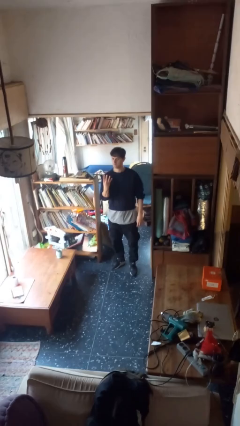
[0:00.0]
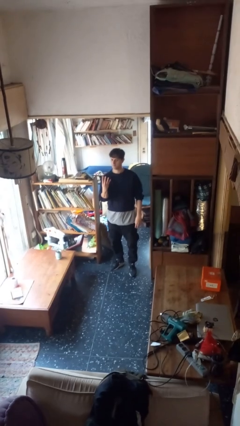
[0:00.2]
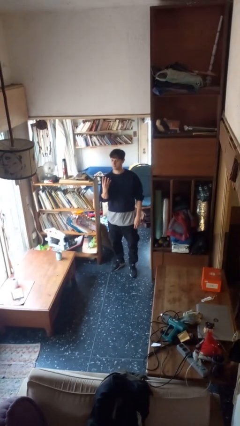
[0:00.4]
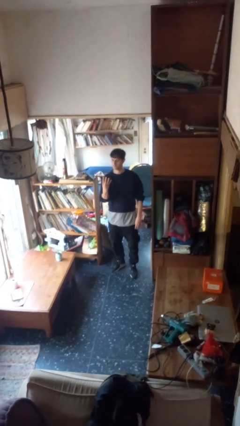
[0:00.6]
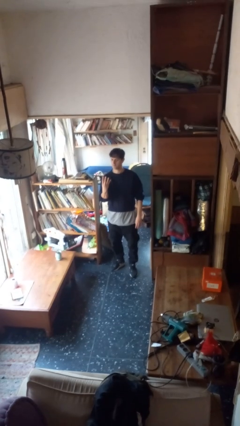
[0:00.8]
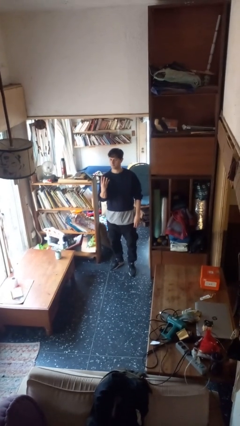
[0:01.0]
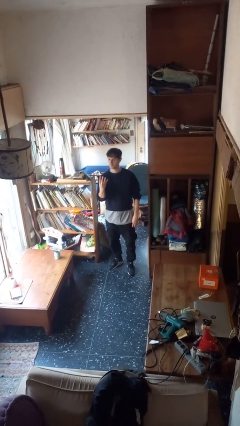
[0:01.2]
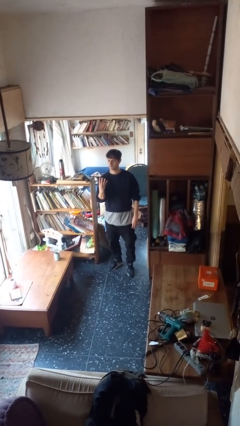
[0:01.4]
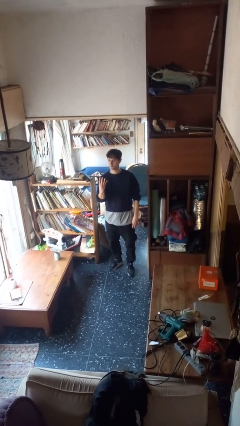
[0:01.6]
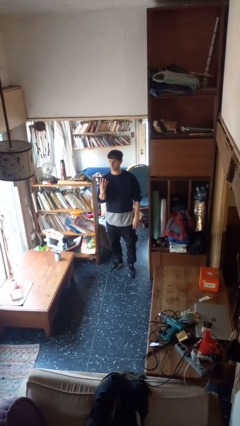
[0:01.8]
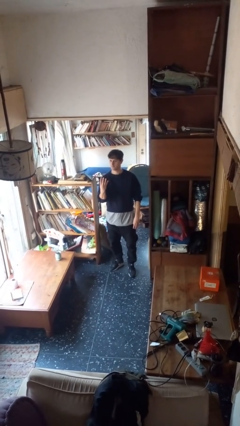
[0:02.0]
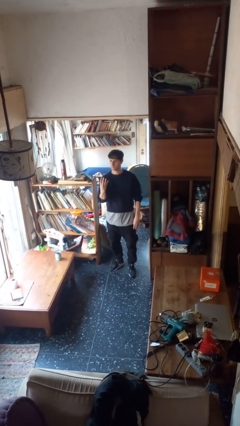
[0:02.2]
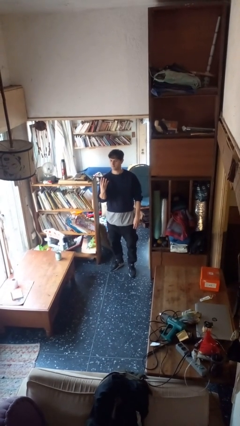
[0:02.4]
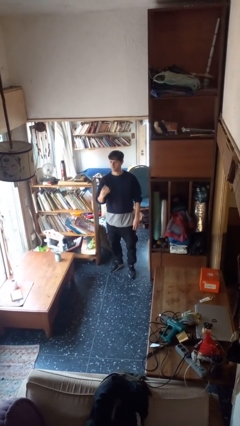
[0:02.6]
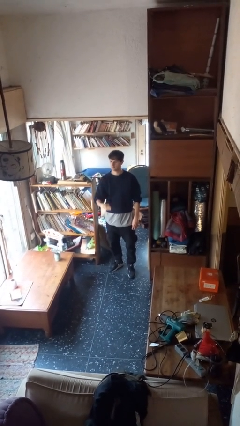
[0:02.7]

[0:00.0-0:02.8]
person gestures number four

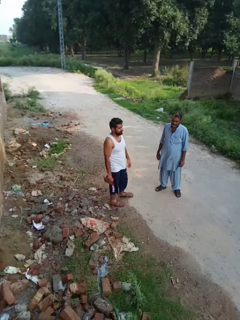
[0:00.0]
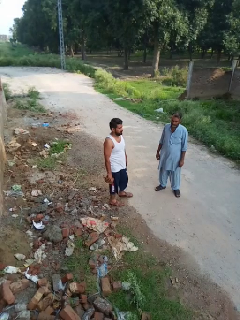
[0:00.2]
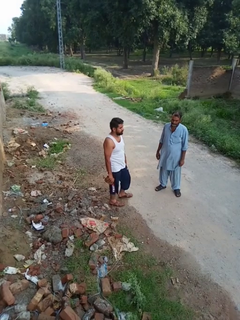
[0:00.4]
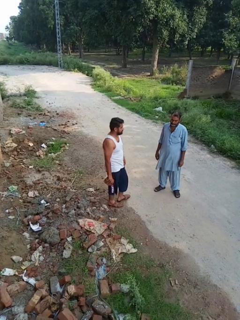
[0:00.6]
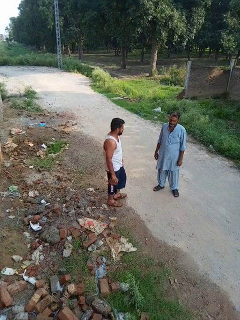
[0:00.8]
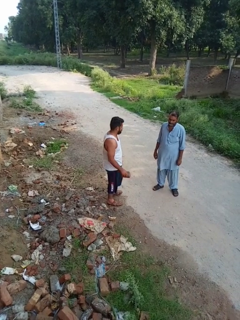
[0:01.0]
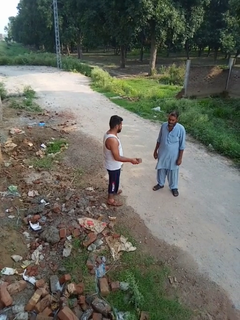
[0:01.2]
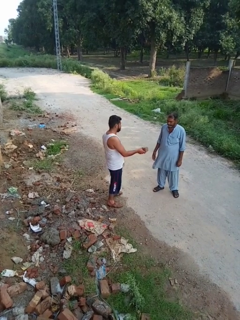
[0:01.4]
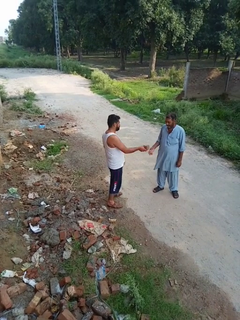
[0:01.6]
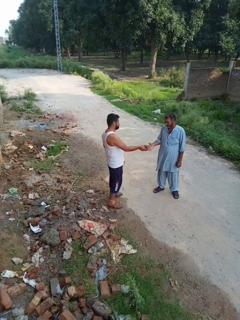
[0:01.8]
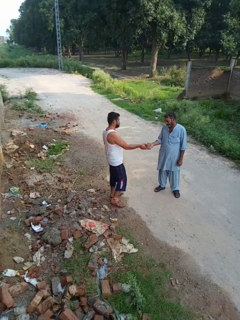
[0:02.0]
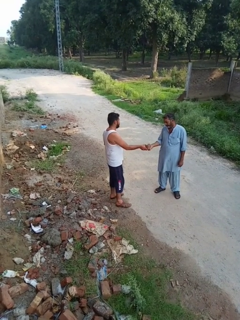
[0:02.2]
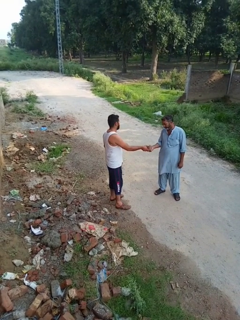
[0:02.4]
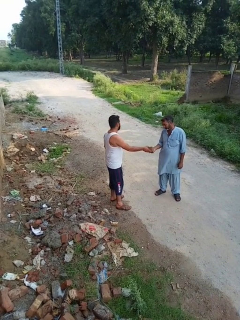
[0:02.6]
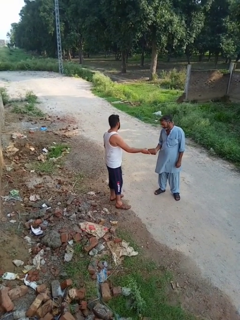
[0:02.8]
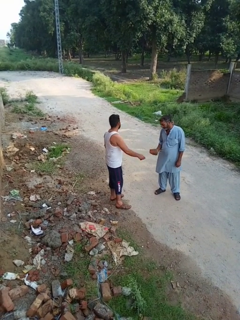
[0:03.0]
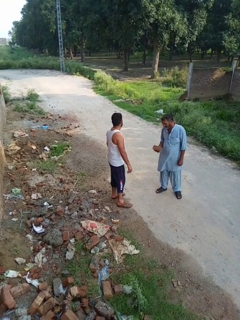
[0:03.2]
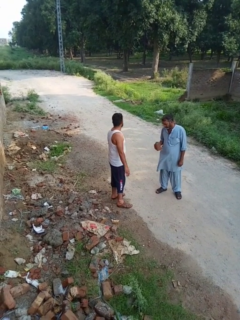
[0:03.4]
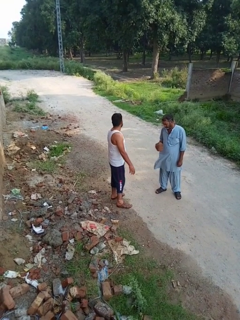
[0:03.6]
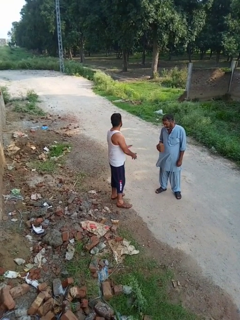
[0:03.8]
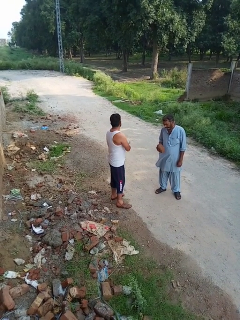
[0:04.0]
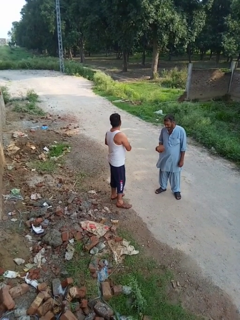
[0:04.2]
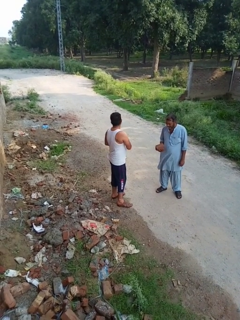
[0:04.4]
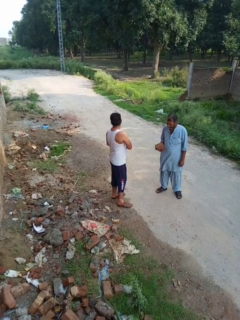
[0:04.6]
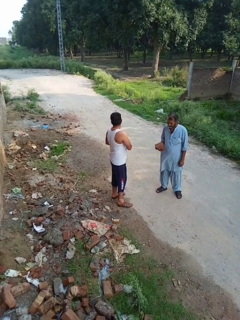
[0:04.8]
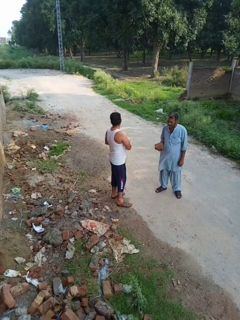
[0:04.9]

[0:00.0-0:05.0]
person transfers object to person

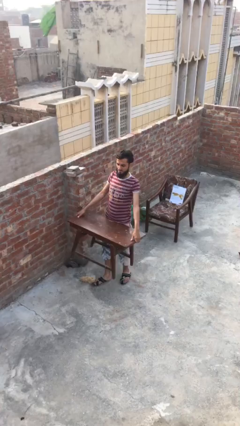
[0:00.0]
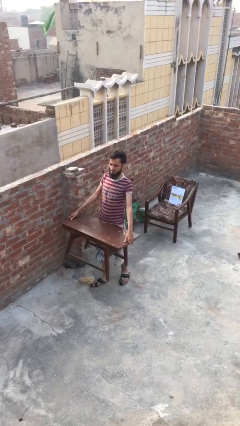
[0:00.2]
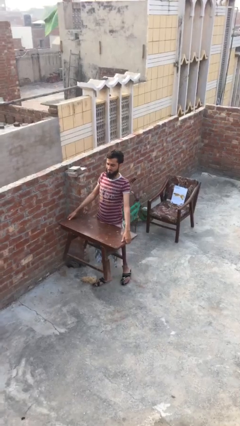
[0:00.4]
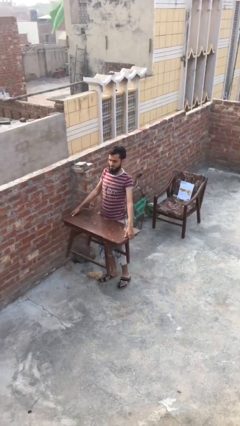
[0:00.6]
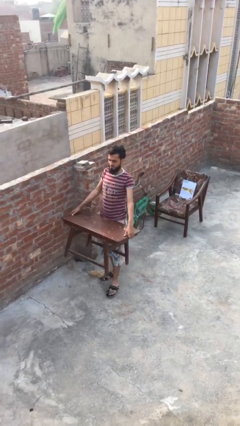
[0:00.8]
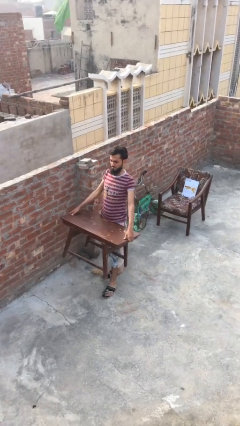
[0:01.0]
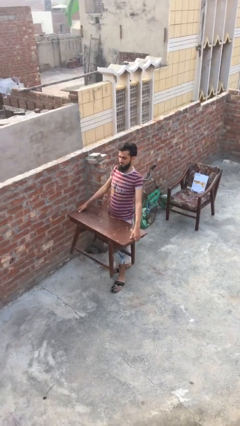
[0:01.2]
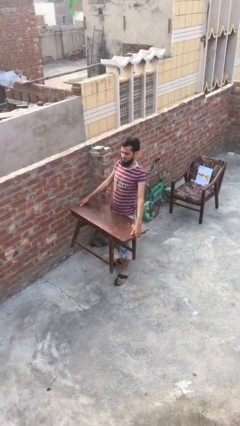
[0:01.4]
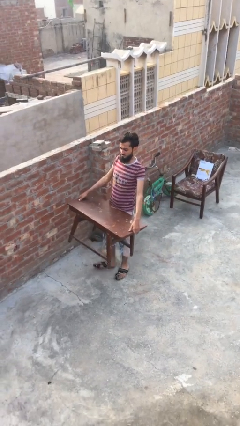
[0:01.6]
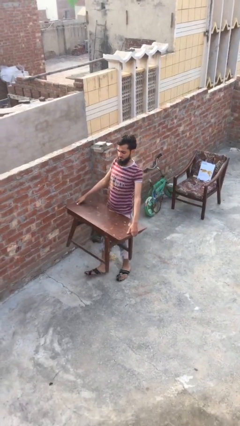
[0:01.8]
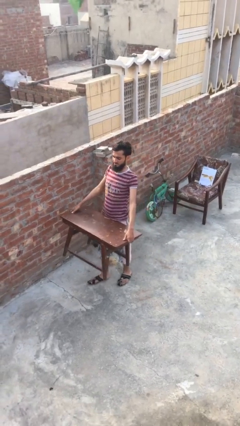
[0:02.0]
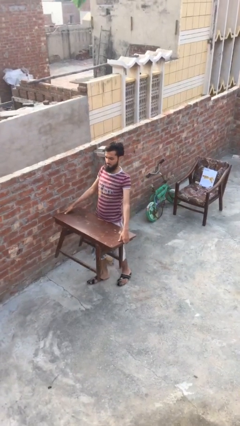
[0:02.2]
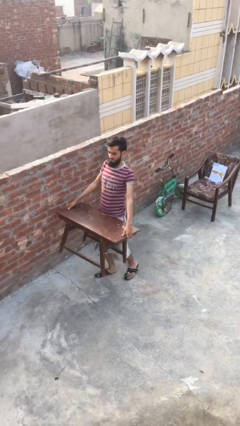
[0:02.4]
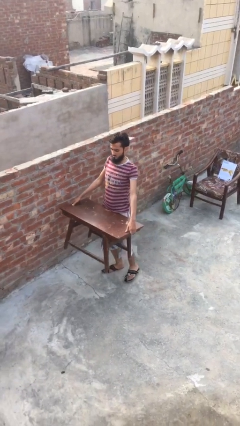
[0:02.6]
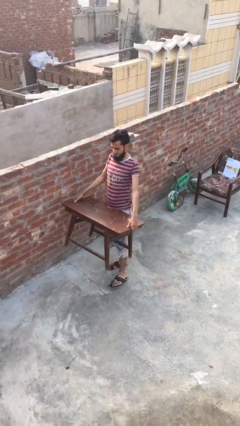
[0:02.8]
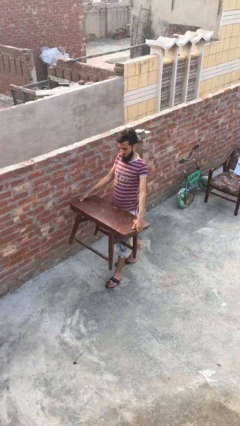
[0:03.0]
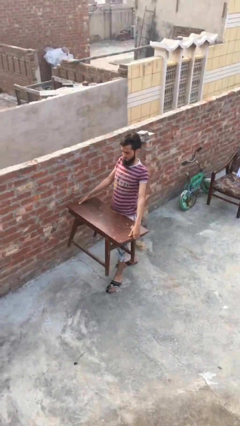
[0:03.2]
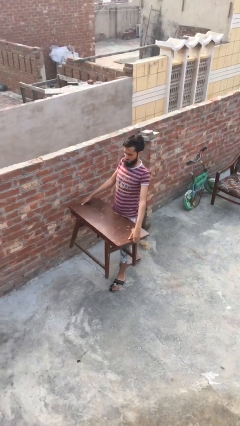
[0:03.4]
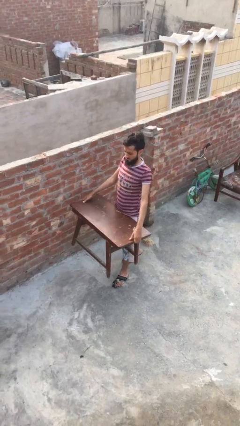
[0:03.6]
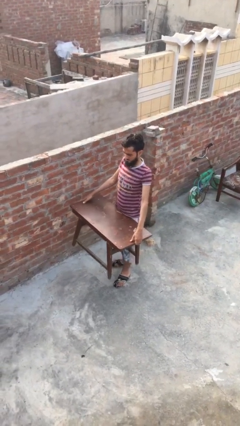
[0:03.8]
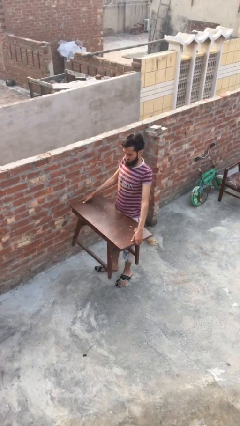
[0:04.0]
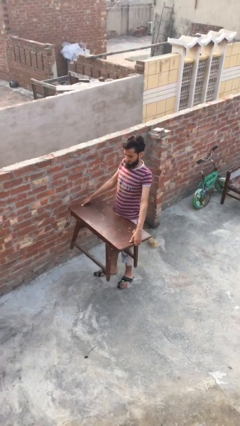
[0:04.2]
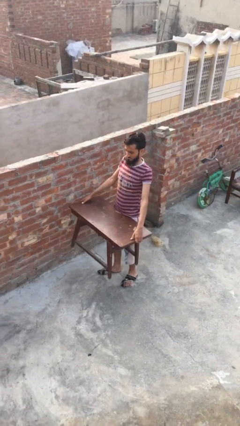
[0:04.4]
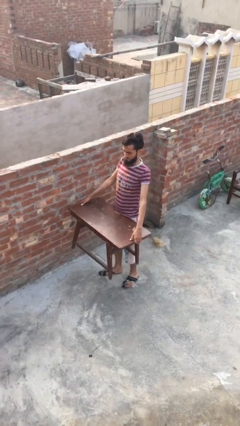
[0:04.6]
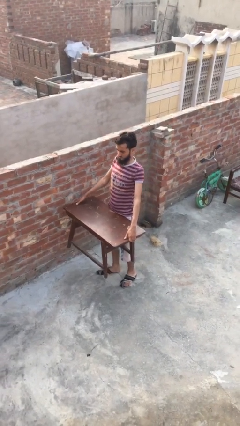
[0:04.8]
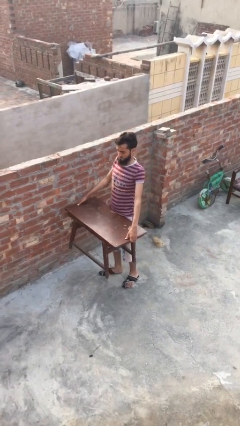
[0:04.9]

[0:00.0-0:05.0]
person carries heavy object

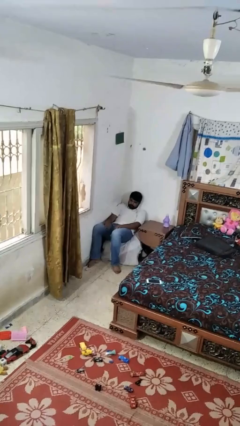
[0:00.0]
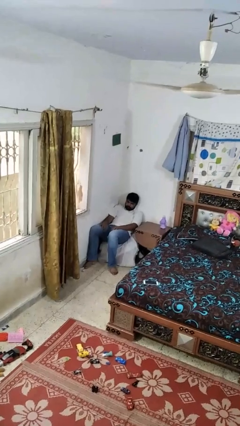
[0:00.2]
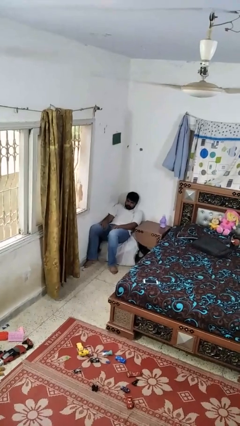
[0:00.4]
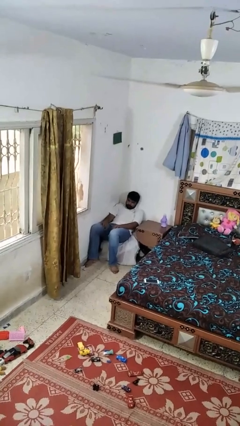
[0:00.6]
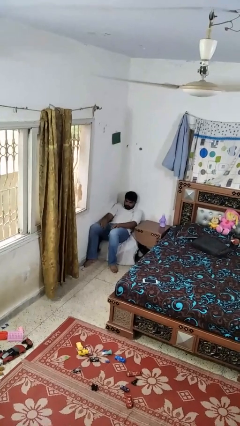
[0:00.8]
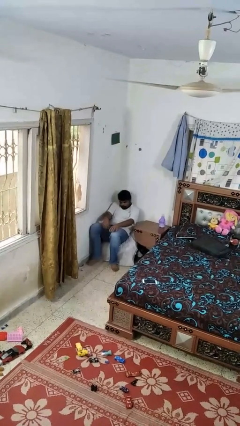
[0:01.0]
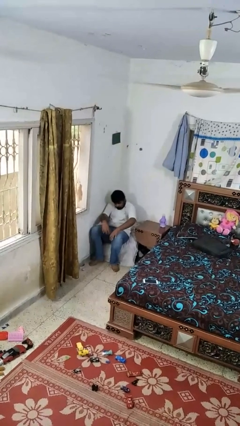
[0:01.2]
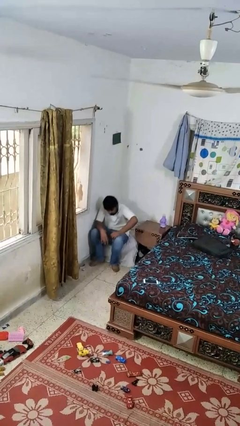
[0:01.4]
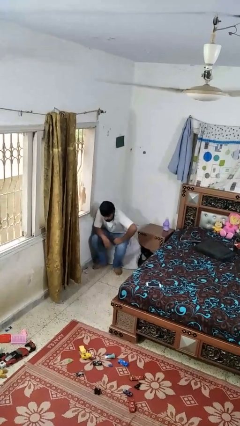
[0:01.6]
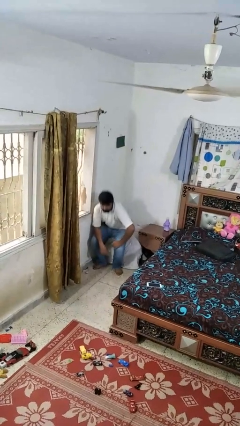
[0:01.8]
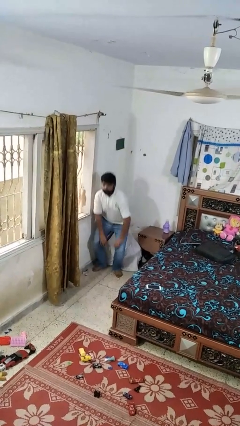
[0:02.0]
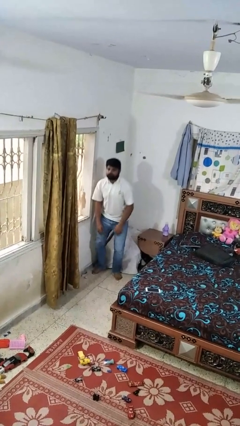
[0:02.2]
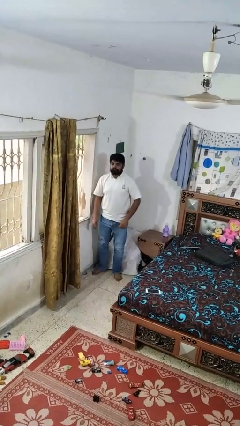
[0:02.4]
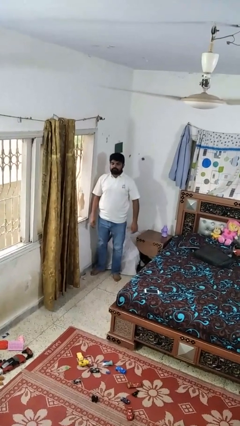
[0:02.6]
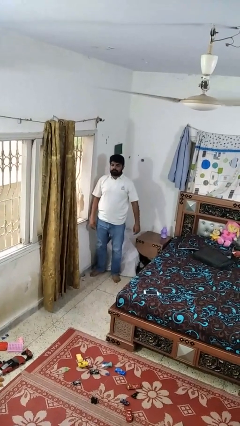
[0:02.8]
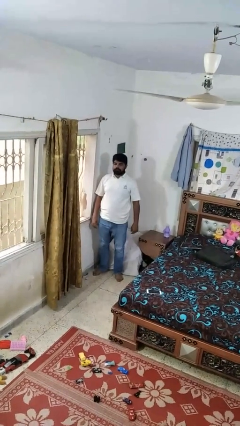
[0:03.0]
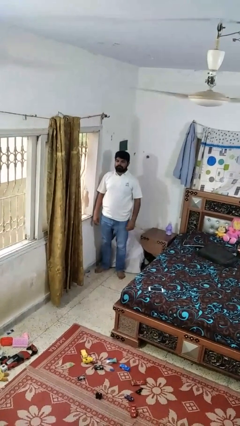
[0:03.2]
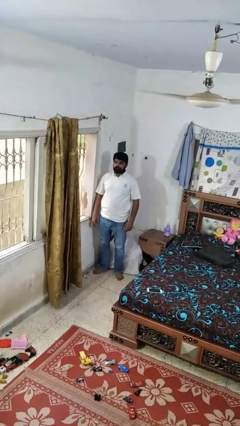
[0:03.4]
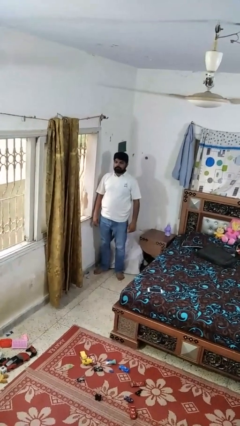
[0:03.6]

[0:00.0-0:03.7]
person stands up

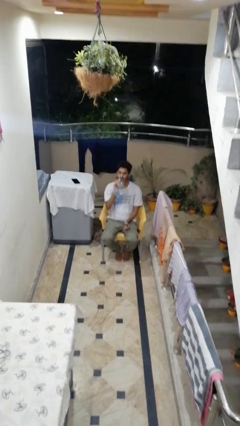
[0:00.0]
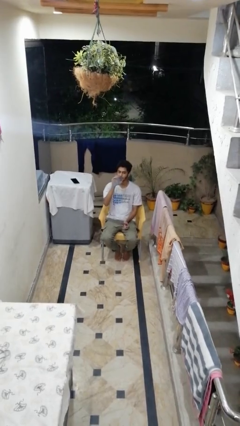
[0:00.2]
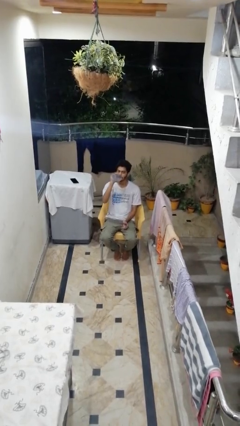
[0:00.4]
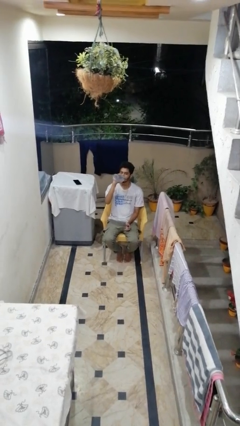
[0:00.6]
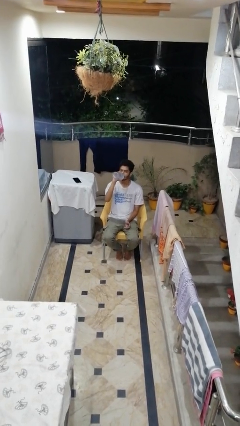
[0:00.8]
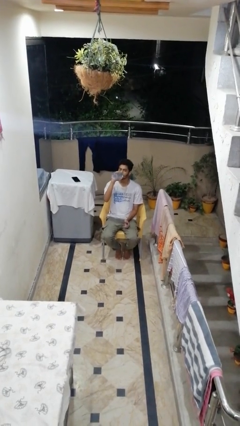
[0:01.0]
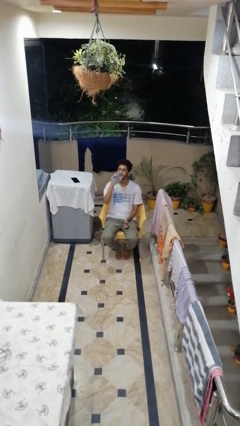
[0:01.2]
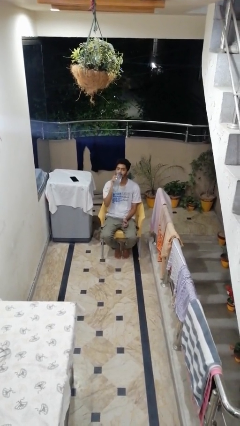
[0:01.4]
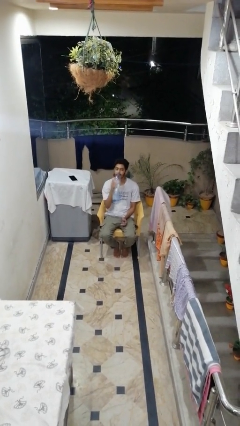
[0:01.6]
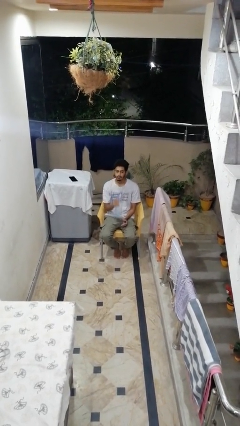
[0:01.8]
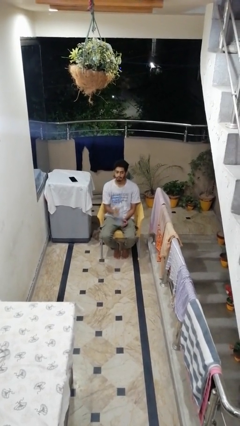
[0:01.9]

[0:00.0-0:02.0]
person drinks from bottle

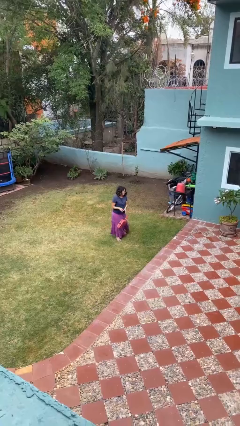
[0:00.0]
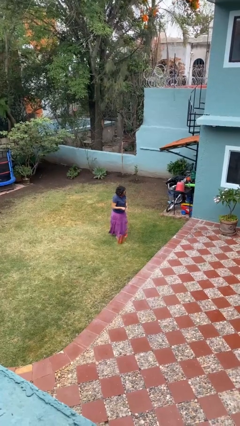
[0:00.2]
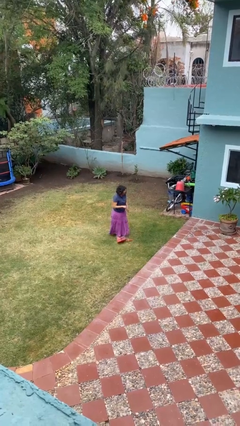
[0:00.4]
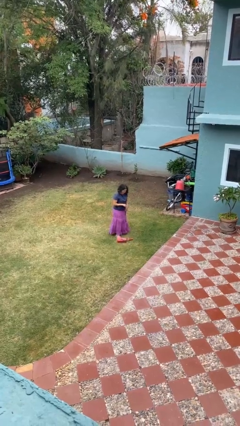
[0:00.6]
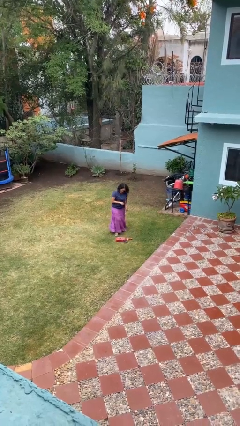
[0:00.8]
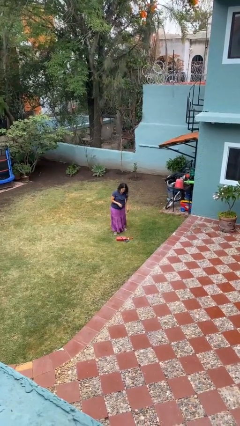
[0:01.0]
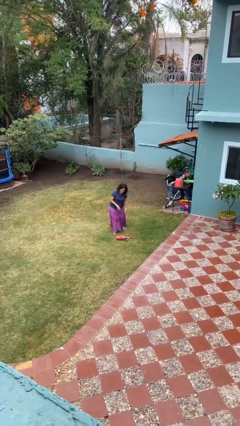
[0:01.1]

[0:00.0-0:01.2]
person drops object
